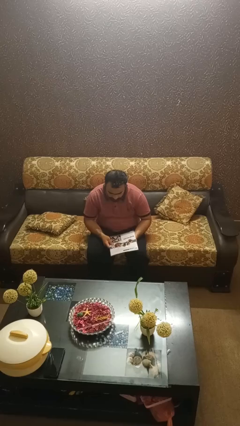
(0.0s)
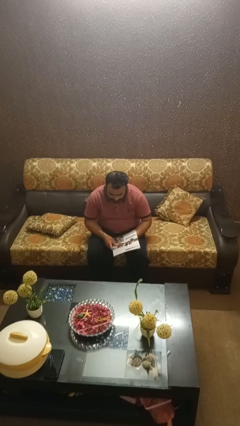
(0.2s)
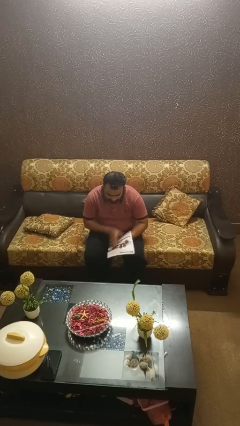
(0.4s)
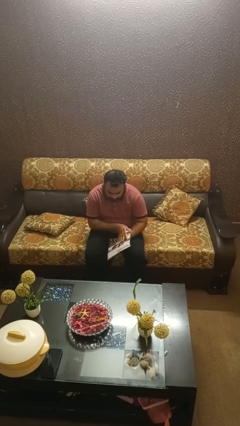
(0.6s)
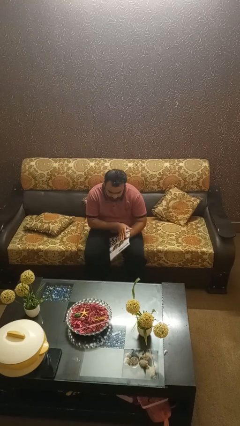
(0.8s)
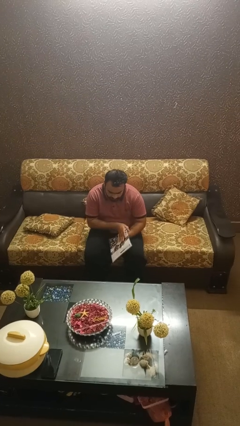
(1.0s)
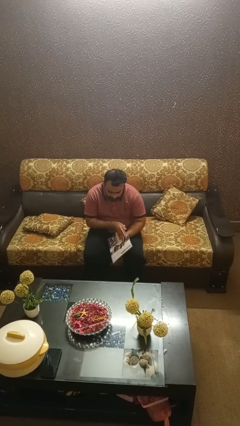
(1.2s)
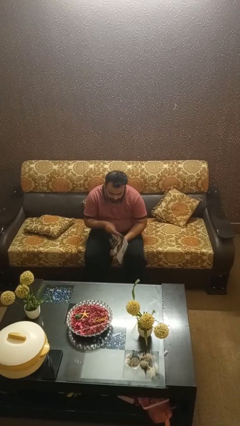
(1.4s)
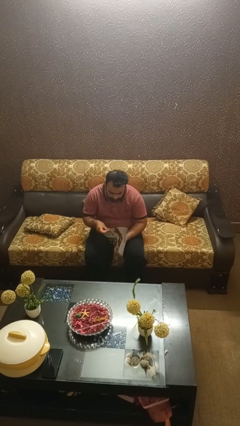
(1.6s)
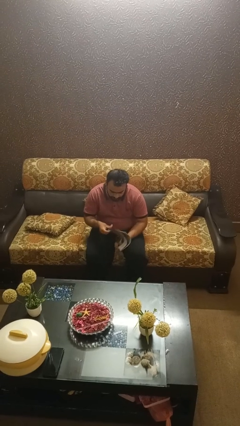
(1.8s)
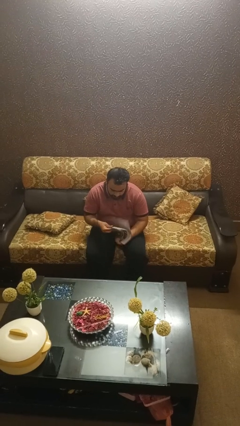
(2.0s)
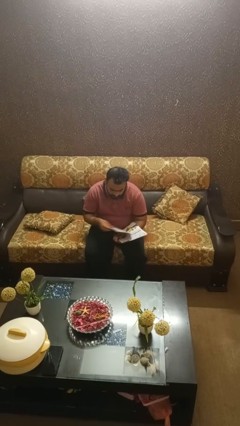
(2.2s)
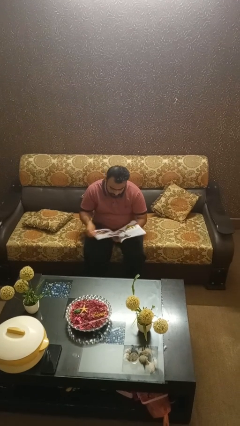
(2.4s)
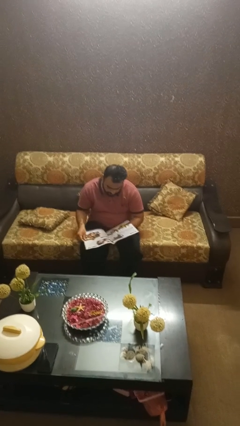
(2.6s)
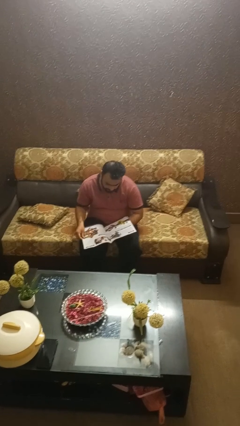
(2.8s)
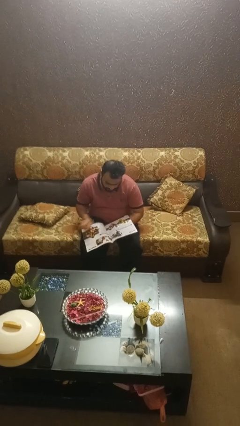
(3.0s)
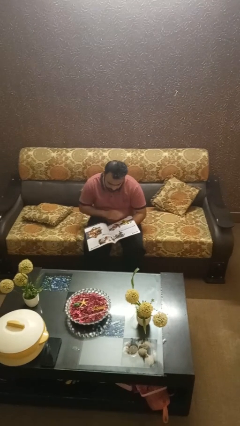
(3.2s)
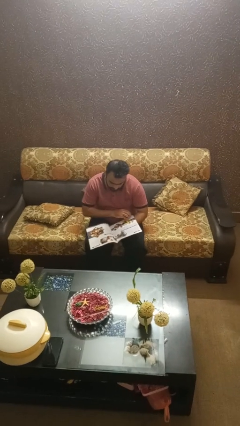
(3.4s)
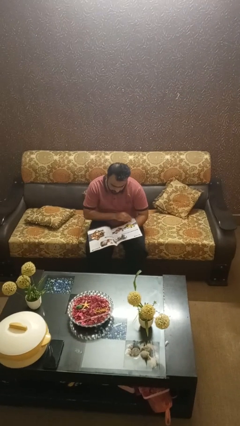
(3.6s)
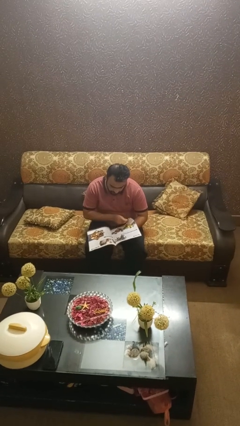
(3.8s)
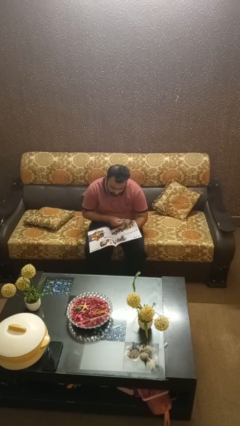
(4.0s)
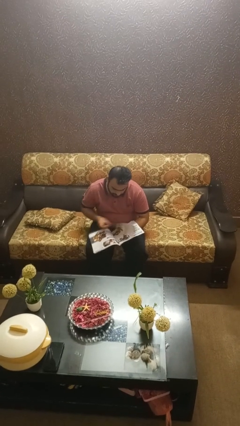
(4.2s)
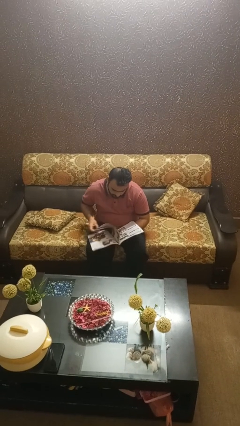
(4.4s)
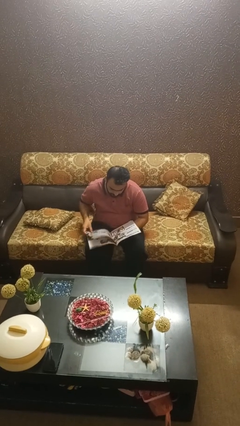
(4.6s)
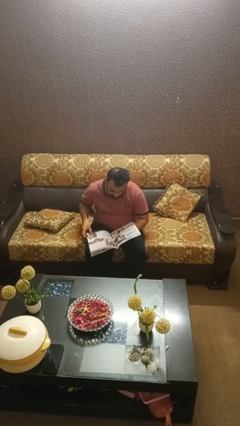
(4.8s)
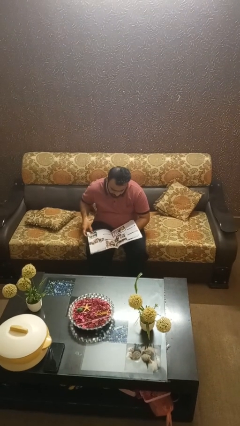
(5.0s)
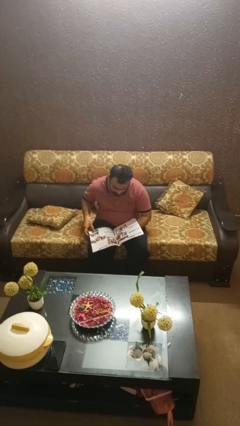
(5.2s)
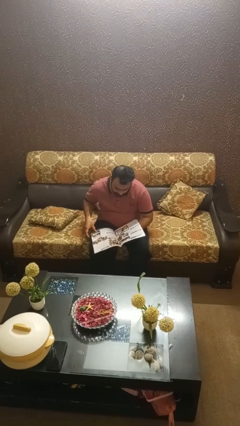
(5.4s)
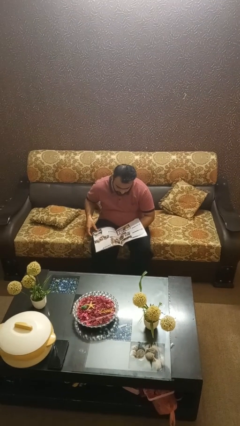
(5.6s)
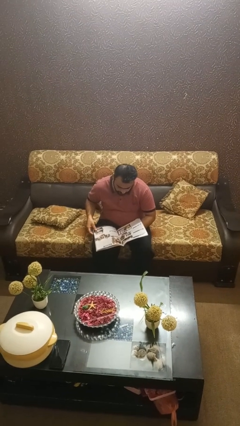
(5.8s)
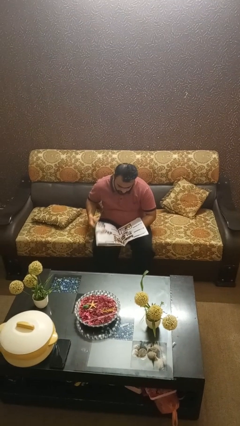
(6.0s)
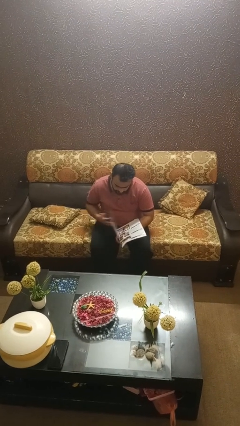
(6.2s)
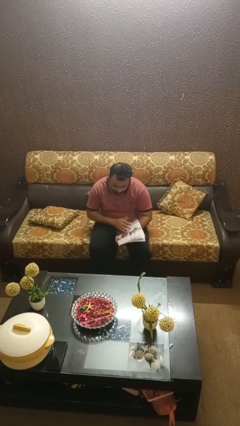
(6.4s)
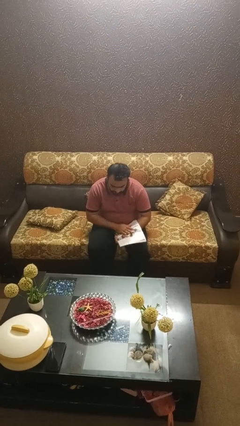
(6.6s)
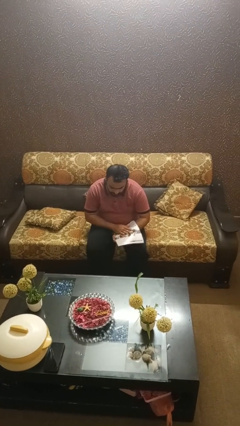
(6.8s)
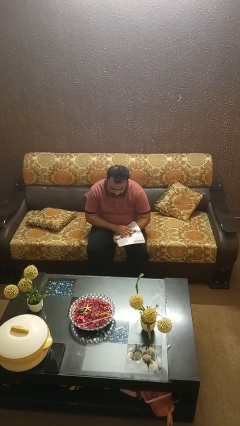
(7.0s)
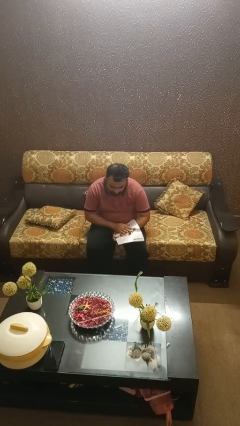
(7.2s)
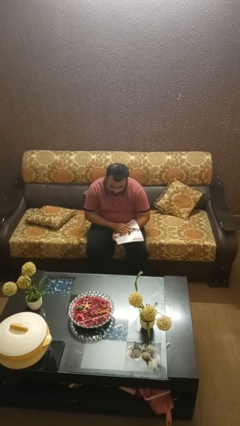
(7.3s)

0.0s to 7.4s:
person reads magazine

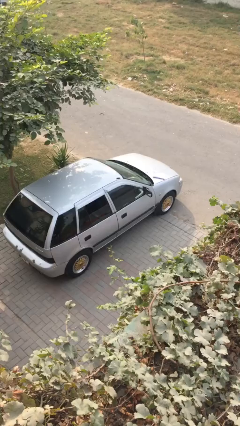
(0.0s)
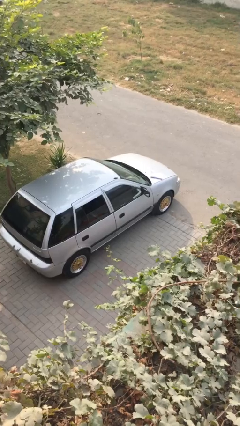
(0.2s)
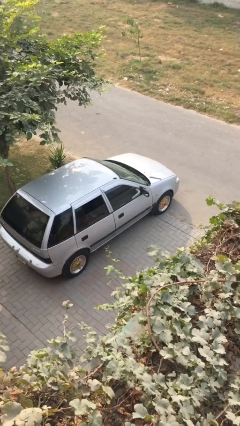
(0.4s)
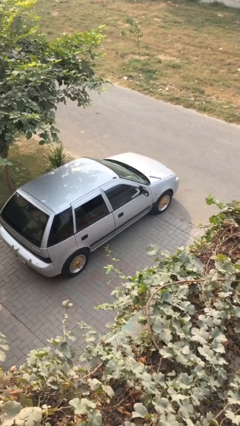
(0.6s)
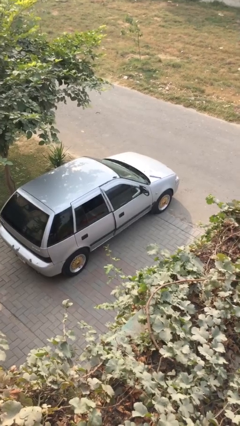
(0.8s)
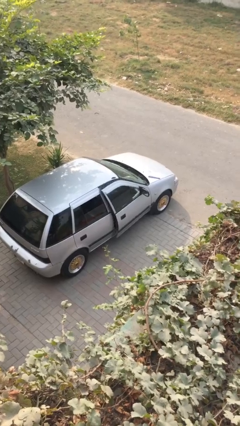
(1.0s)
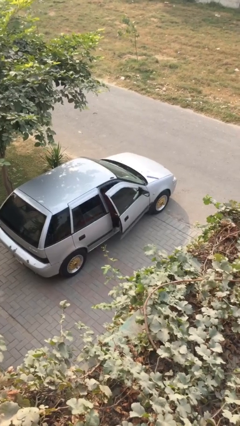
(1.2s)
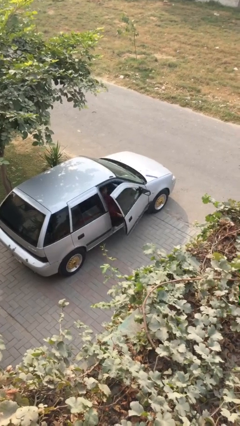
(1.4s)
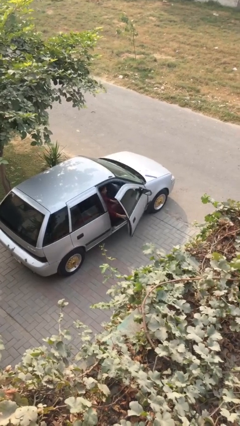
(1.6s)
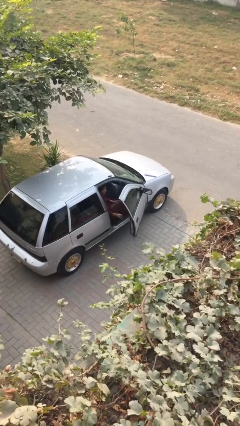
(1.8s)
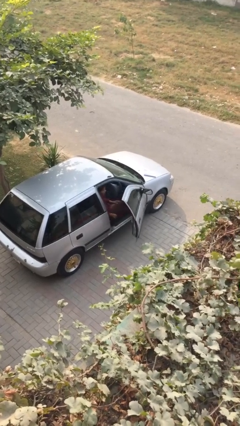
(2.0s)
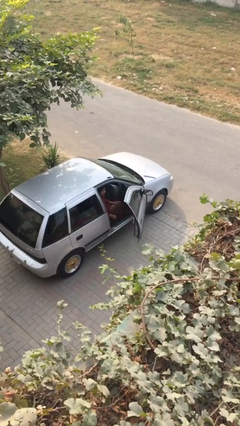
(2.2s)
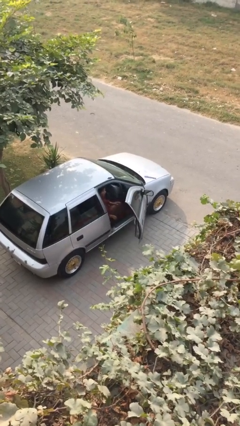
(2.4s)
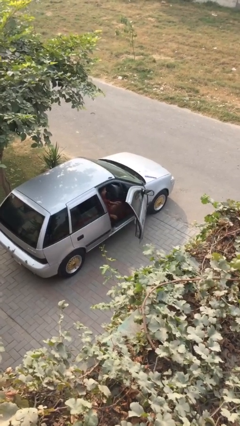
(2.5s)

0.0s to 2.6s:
person opens car door

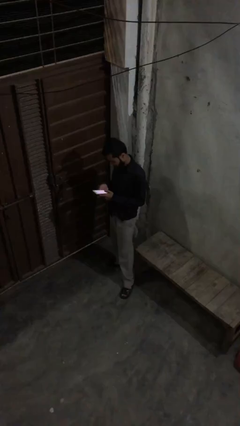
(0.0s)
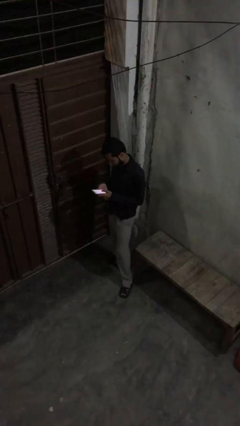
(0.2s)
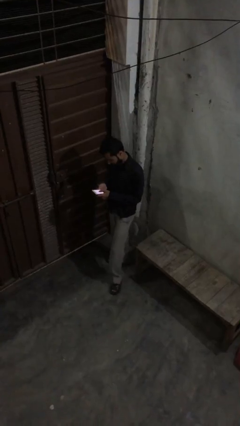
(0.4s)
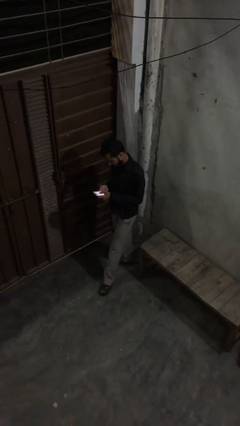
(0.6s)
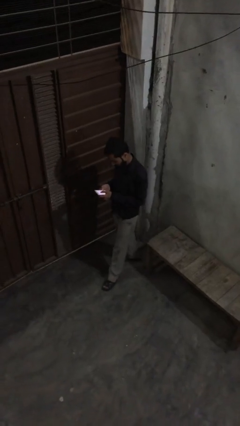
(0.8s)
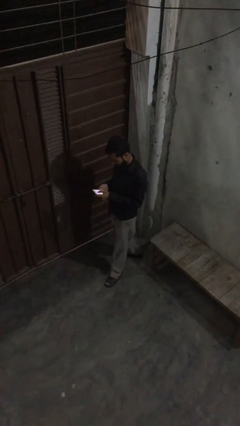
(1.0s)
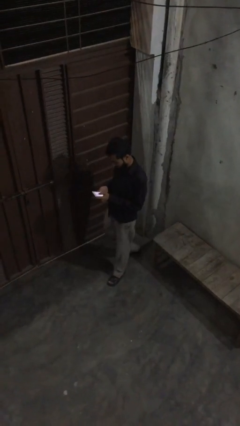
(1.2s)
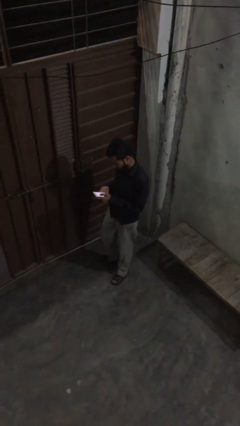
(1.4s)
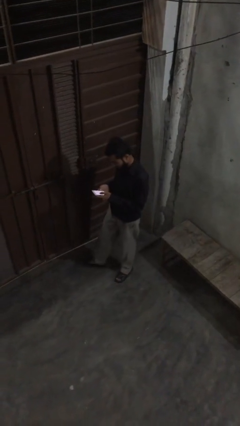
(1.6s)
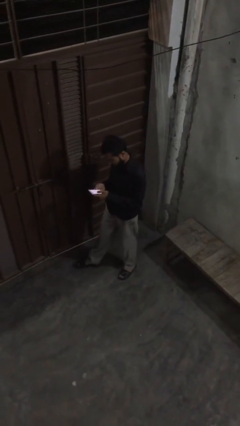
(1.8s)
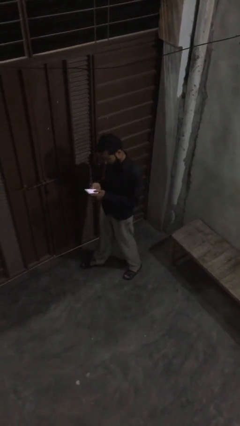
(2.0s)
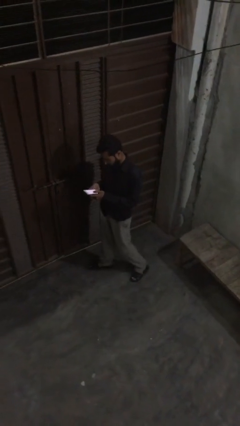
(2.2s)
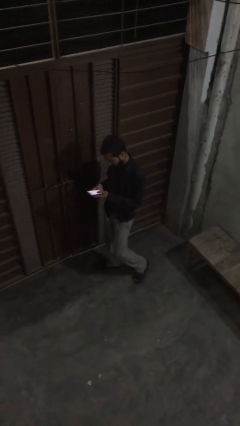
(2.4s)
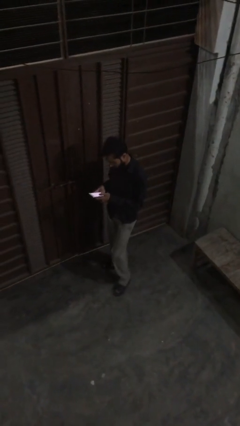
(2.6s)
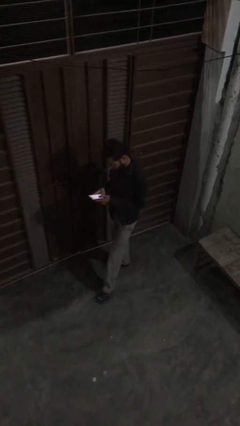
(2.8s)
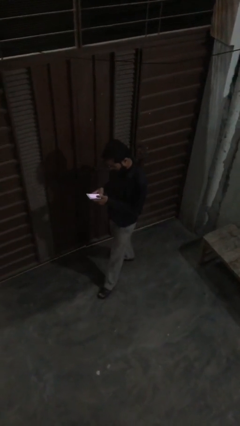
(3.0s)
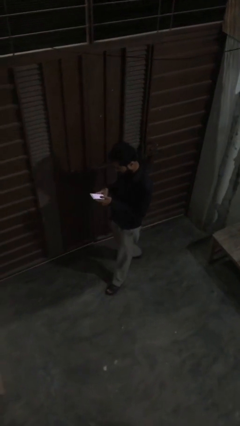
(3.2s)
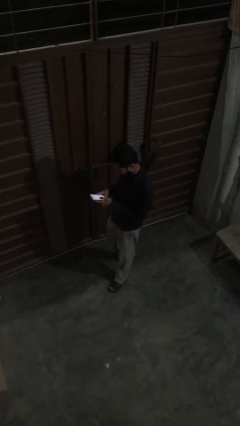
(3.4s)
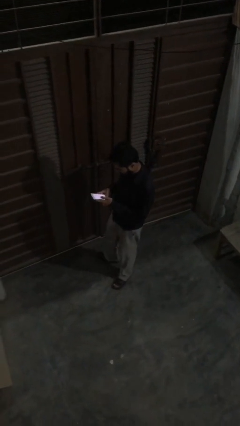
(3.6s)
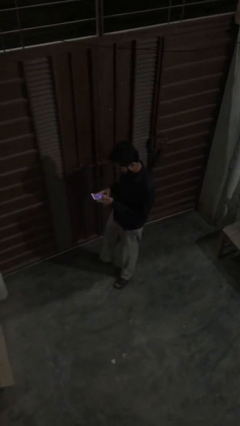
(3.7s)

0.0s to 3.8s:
person texts on phone

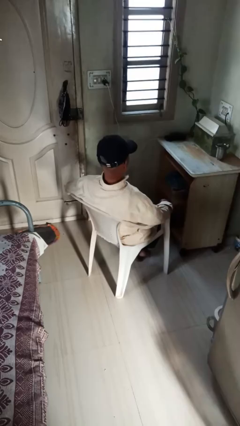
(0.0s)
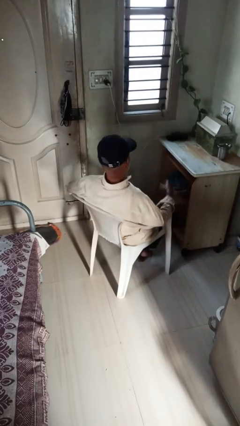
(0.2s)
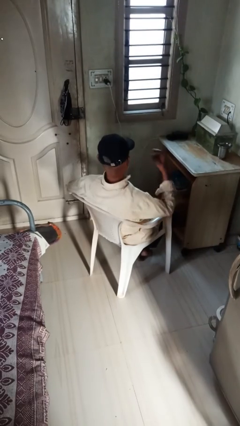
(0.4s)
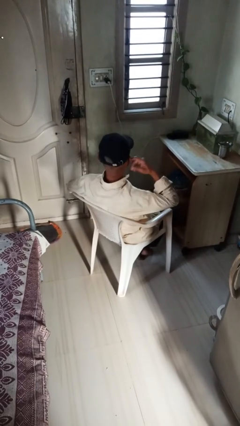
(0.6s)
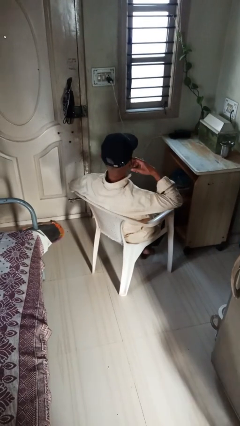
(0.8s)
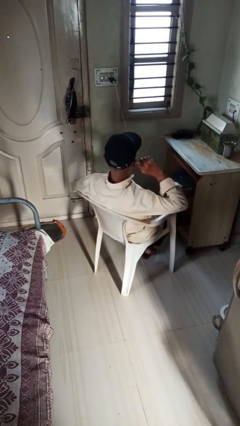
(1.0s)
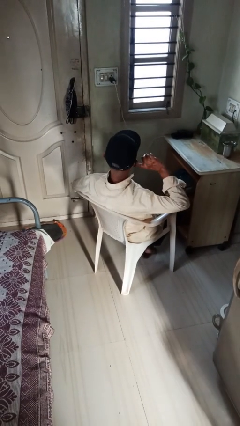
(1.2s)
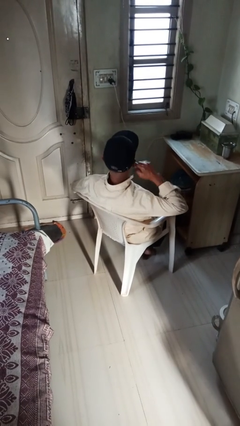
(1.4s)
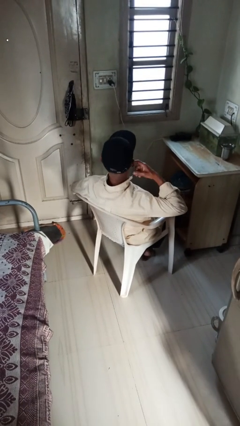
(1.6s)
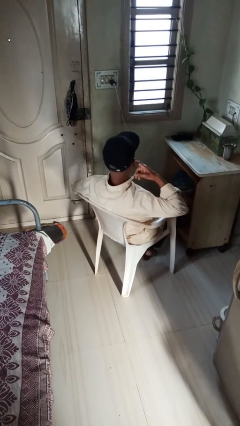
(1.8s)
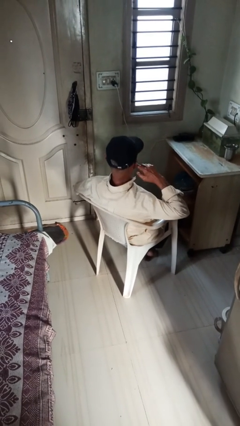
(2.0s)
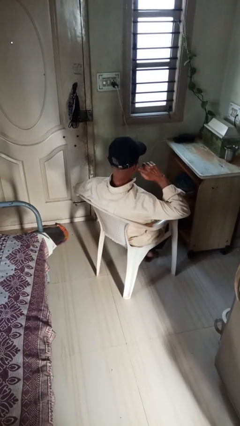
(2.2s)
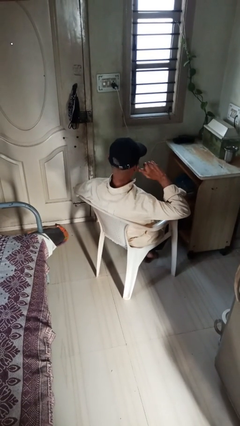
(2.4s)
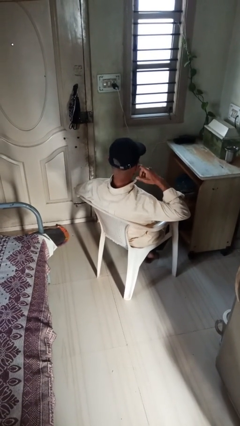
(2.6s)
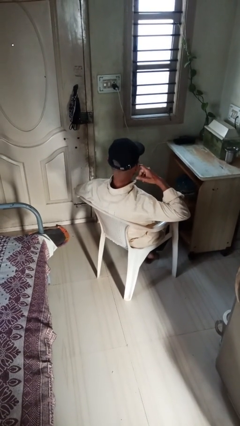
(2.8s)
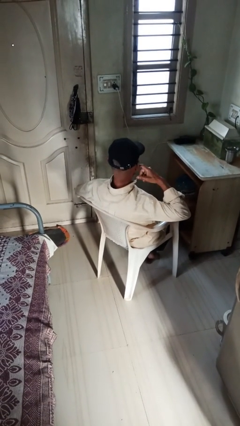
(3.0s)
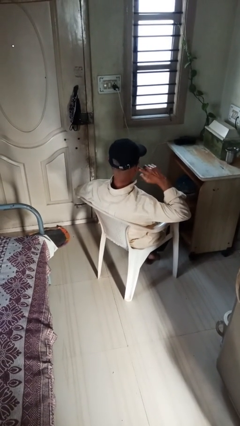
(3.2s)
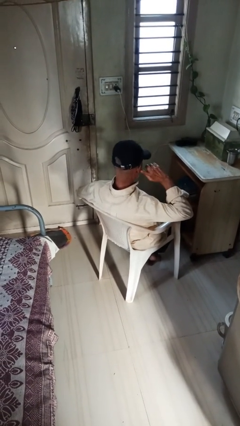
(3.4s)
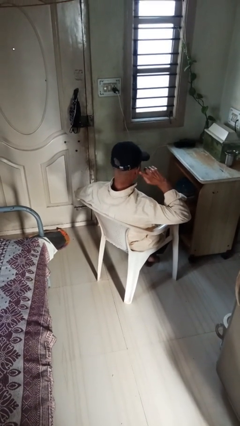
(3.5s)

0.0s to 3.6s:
person puts fingers in ear

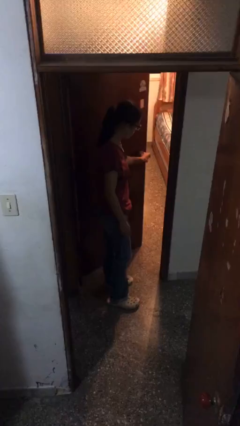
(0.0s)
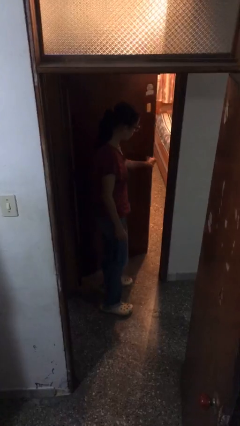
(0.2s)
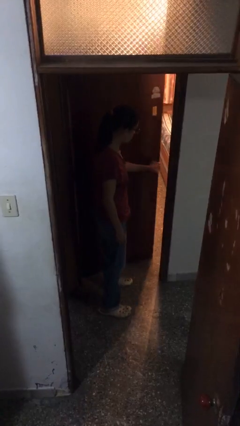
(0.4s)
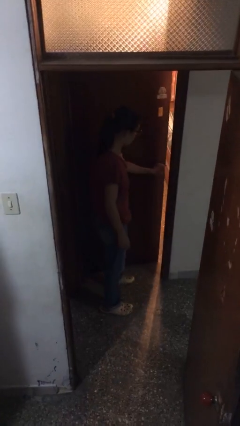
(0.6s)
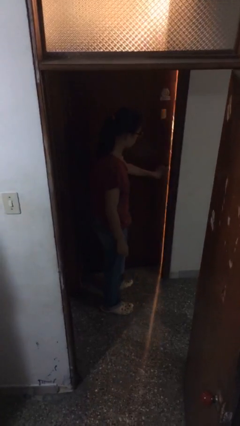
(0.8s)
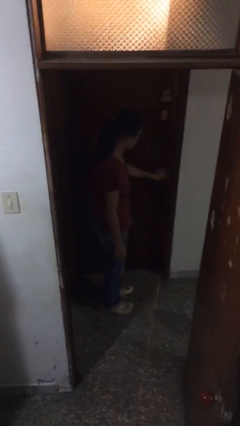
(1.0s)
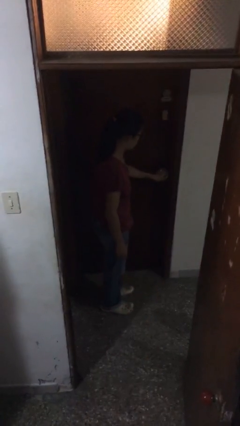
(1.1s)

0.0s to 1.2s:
person closes facility door
